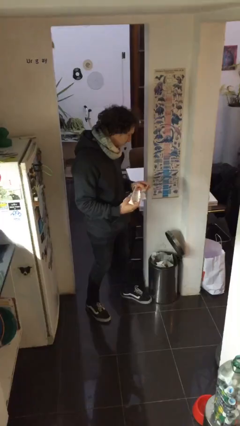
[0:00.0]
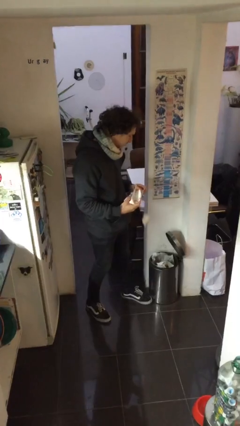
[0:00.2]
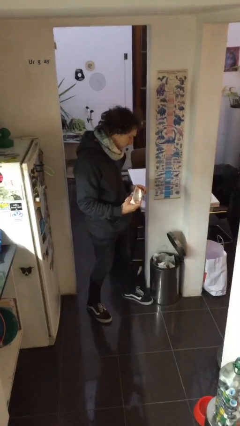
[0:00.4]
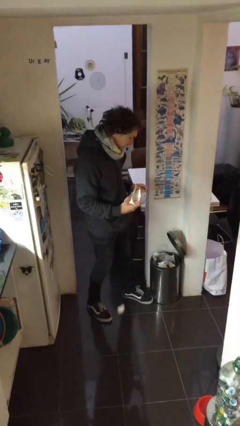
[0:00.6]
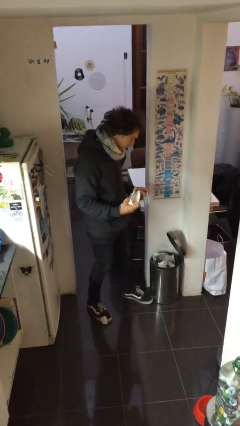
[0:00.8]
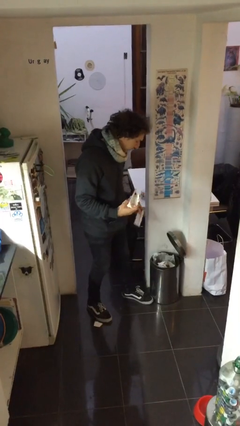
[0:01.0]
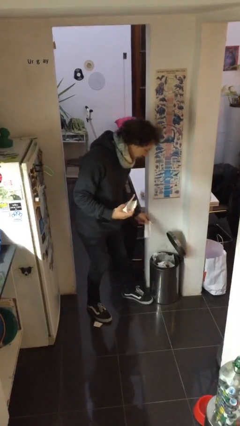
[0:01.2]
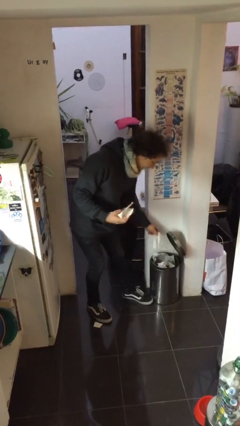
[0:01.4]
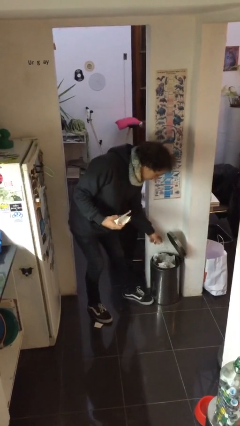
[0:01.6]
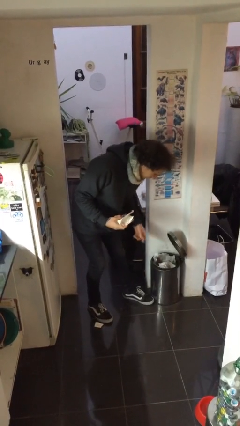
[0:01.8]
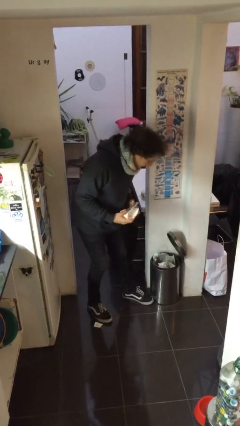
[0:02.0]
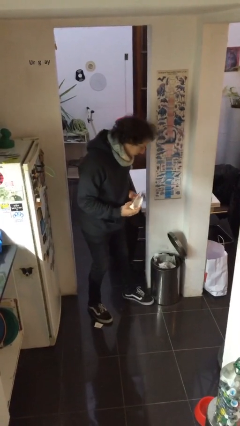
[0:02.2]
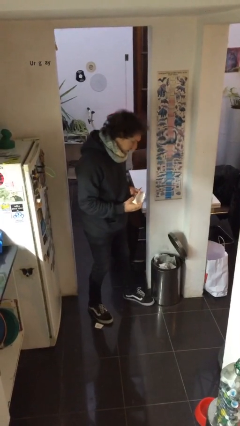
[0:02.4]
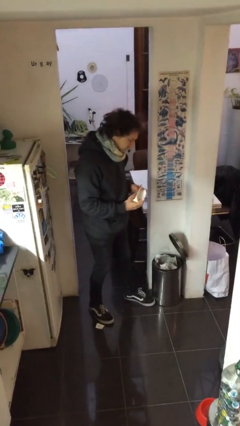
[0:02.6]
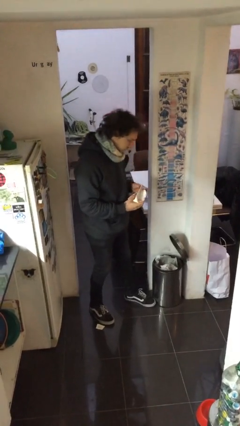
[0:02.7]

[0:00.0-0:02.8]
person discards trash

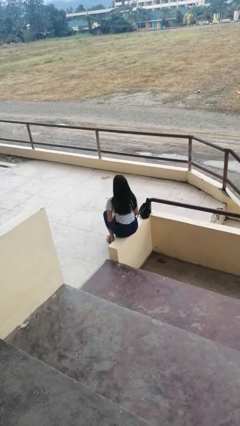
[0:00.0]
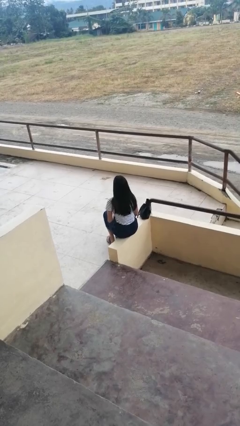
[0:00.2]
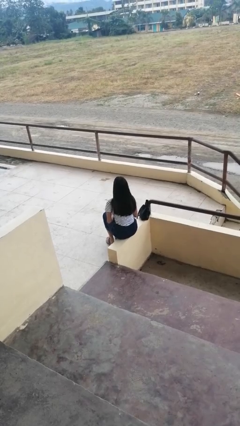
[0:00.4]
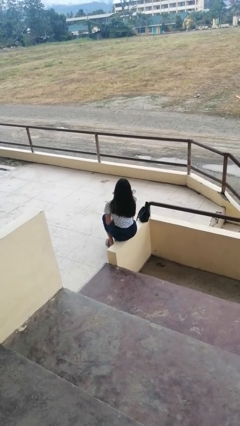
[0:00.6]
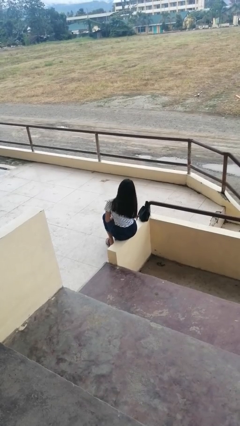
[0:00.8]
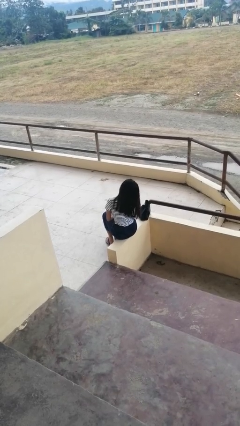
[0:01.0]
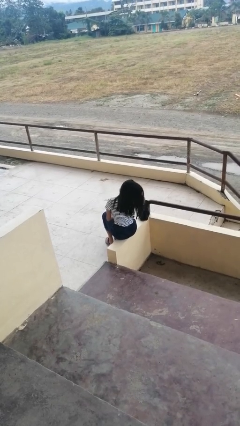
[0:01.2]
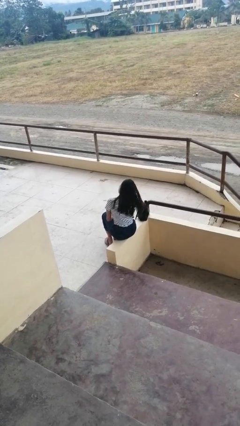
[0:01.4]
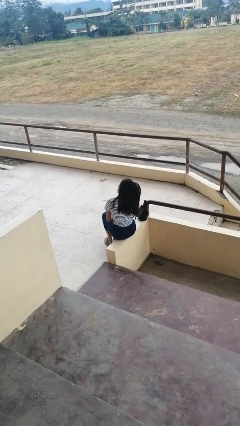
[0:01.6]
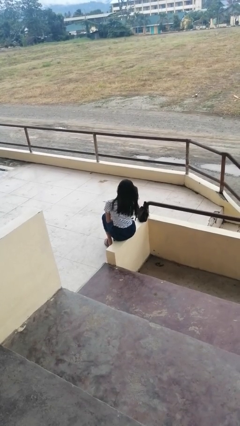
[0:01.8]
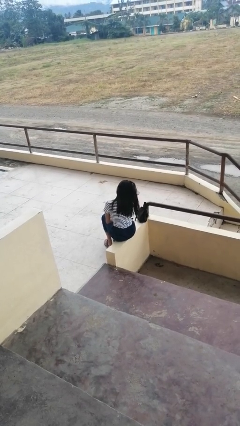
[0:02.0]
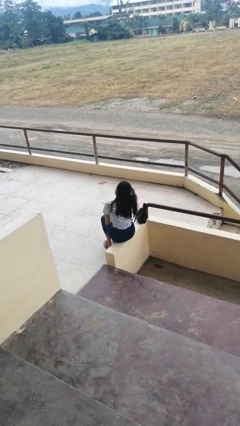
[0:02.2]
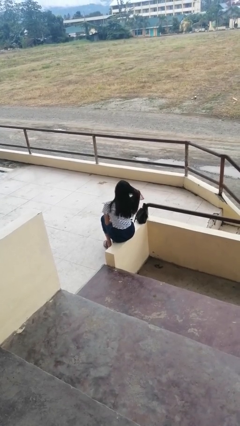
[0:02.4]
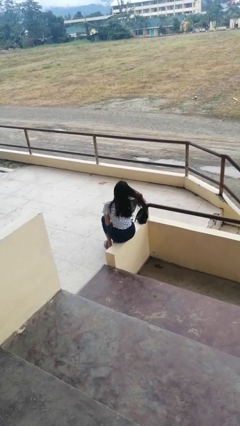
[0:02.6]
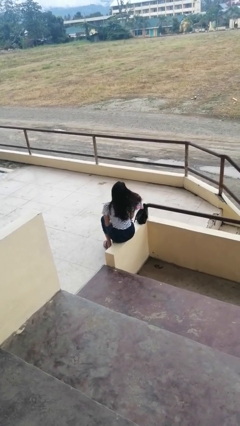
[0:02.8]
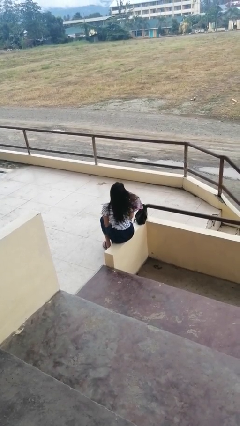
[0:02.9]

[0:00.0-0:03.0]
person dries hair with towel

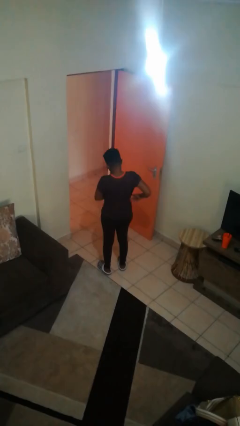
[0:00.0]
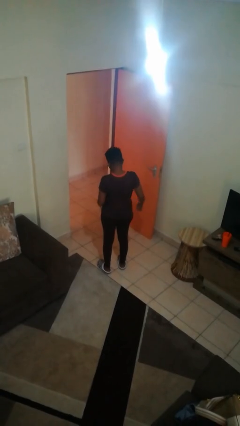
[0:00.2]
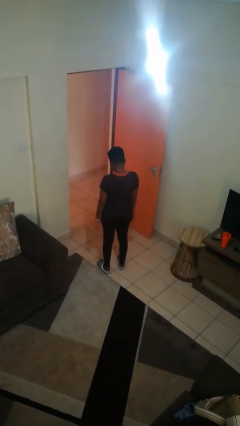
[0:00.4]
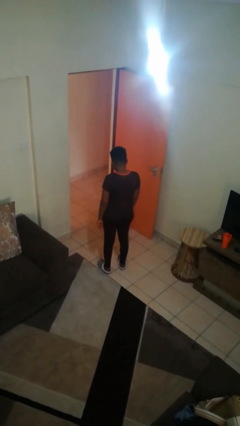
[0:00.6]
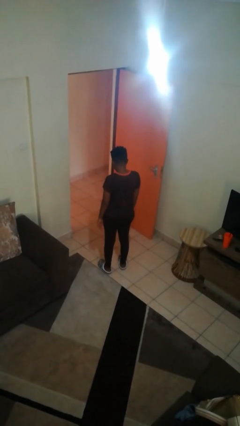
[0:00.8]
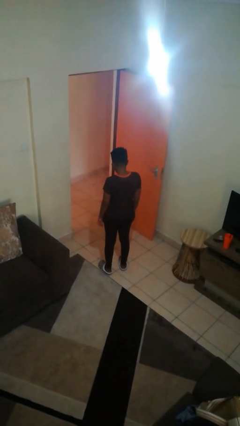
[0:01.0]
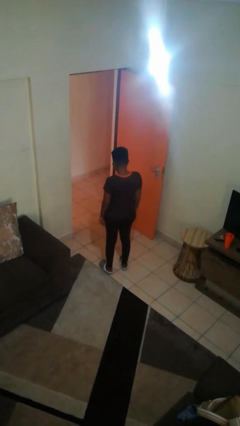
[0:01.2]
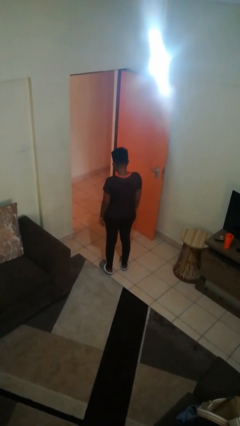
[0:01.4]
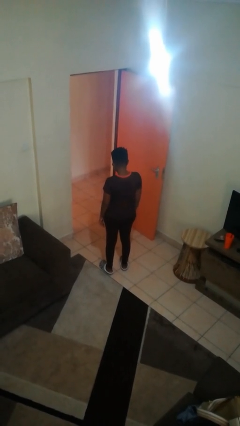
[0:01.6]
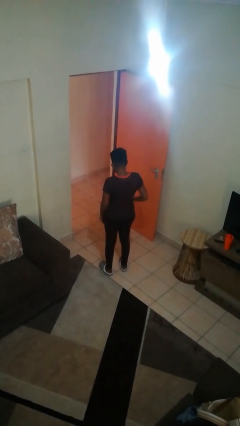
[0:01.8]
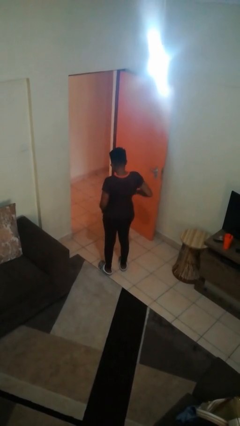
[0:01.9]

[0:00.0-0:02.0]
person puts phone into pocket

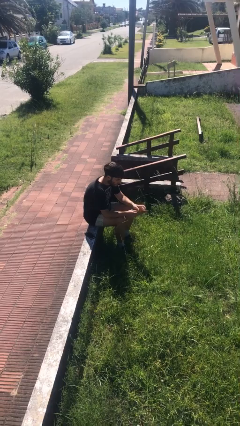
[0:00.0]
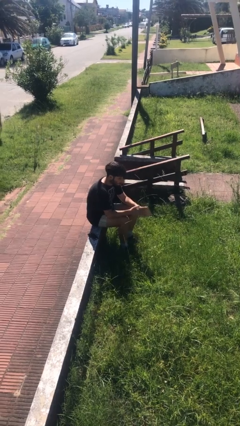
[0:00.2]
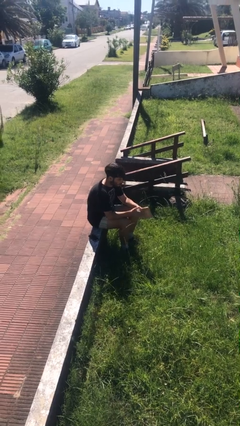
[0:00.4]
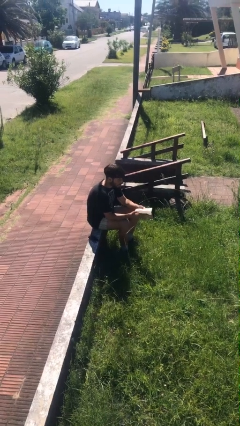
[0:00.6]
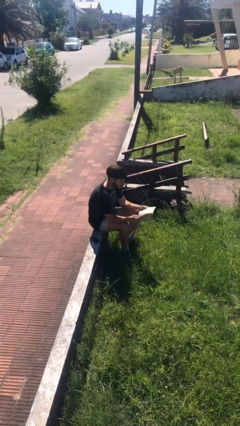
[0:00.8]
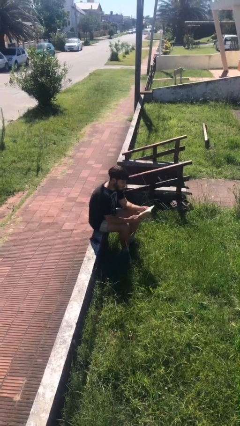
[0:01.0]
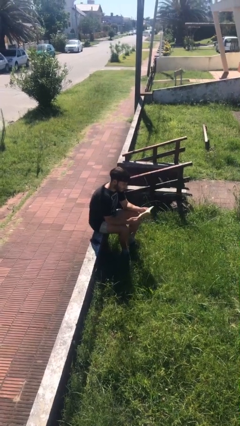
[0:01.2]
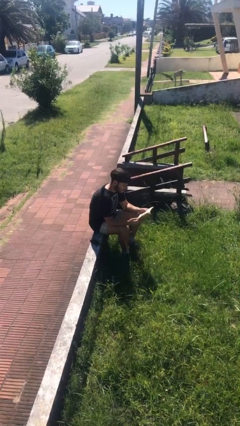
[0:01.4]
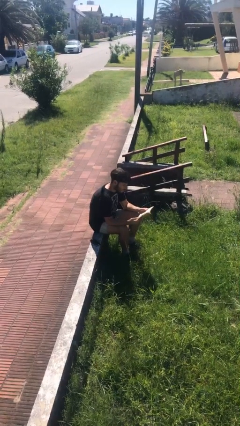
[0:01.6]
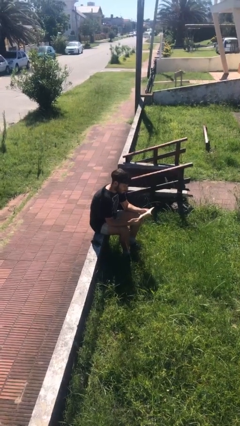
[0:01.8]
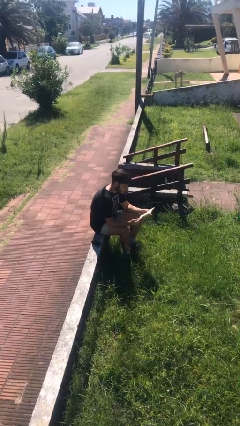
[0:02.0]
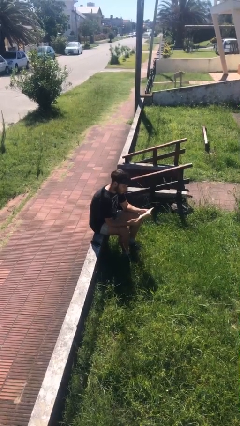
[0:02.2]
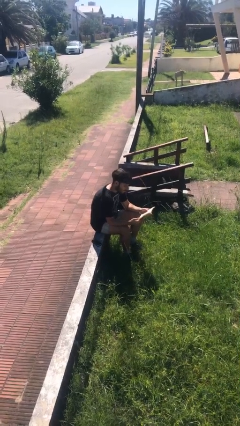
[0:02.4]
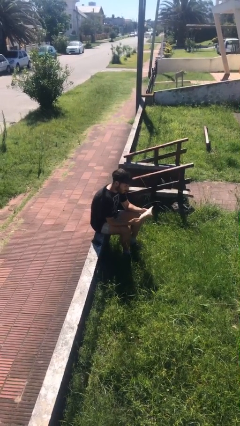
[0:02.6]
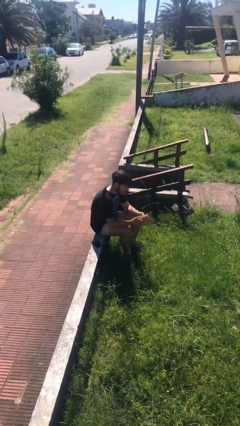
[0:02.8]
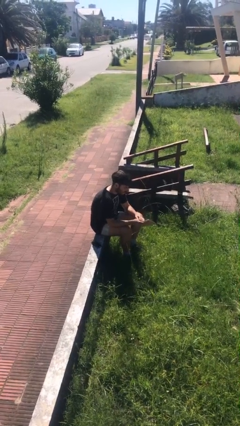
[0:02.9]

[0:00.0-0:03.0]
person reads document

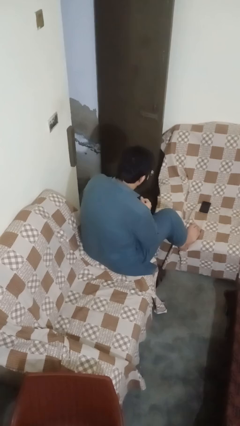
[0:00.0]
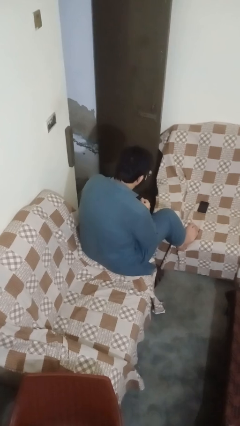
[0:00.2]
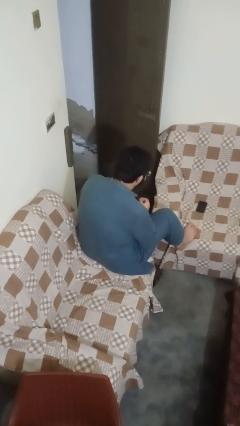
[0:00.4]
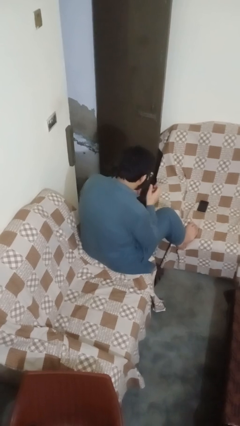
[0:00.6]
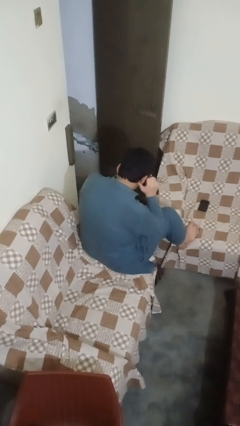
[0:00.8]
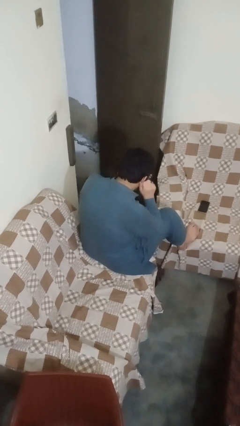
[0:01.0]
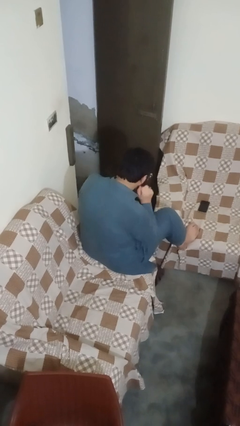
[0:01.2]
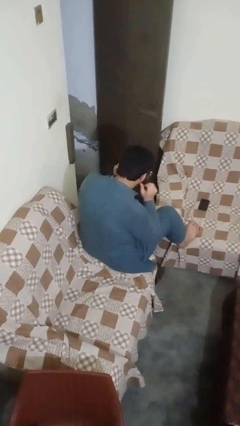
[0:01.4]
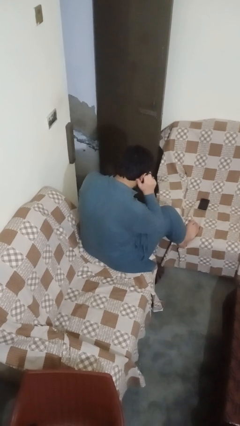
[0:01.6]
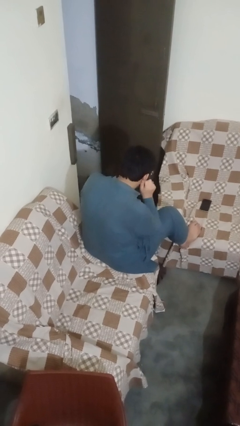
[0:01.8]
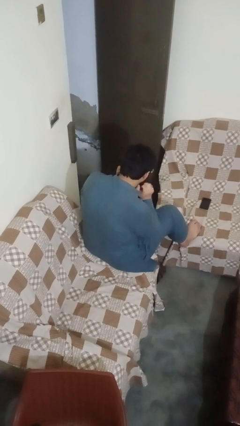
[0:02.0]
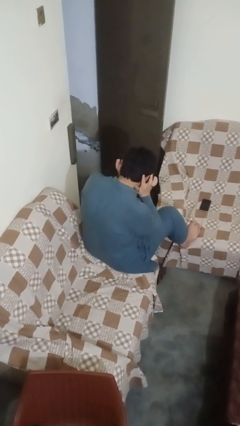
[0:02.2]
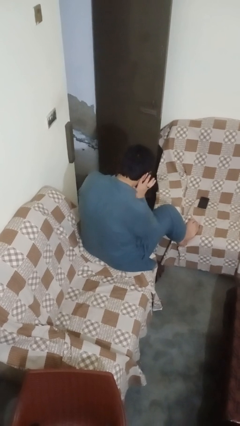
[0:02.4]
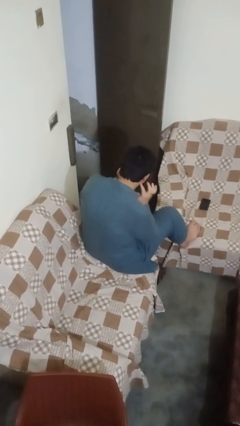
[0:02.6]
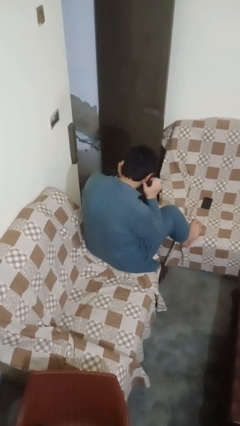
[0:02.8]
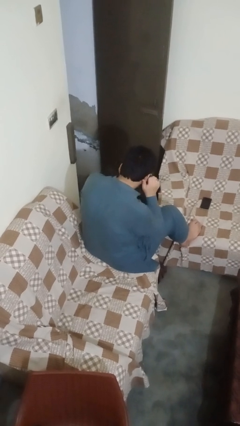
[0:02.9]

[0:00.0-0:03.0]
person touches earlobe

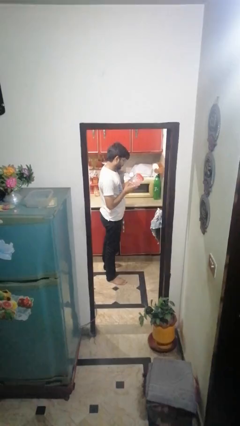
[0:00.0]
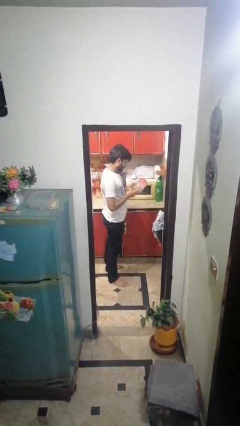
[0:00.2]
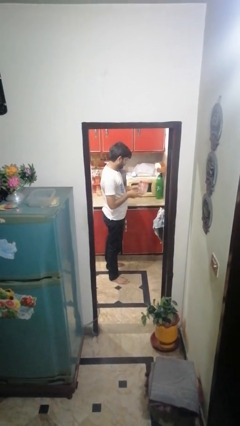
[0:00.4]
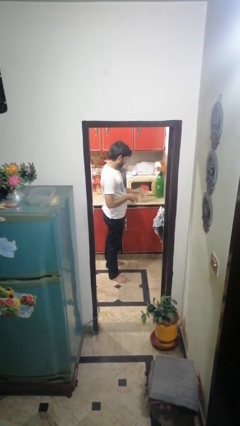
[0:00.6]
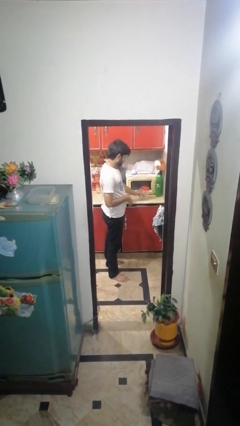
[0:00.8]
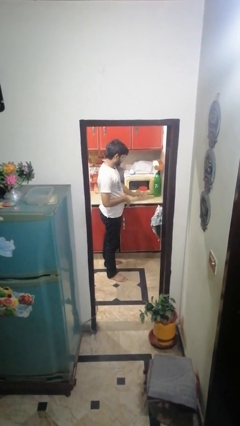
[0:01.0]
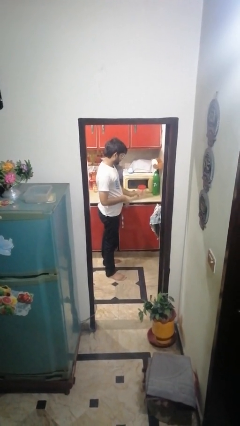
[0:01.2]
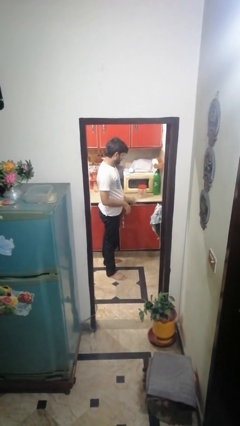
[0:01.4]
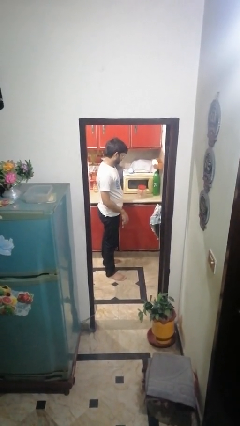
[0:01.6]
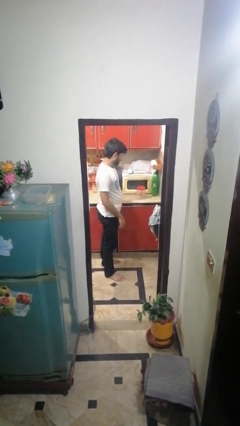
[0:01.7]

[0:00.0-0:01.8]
person puts down object on countertop

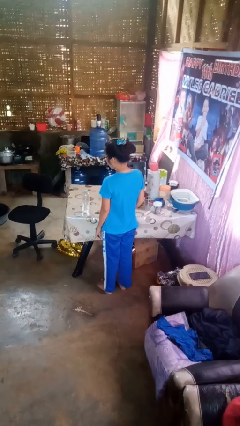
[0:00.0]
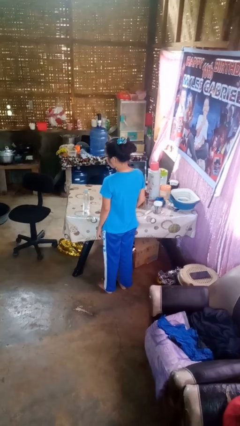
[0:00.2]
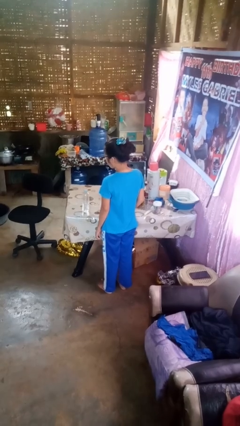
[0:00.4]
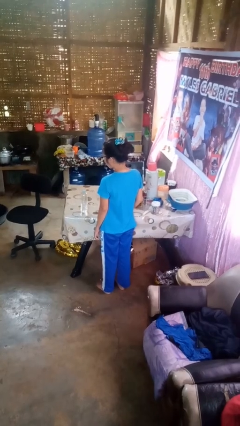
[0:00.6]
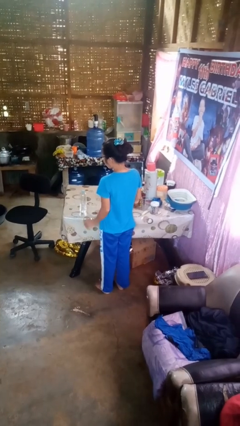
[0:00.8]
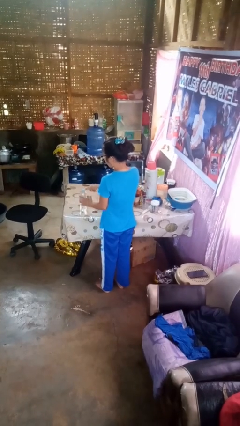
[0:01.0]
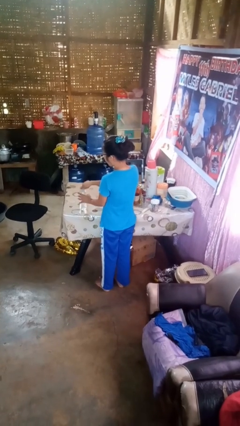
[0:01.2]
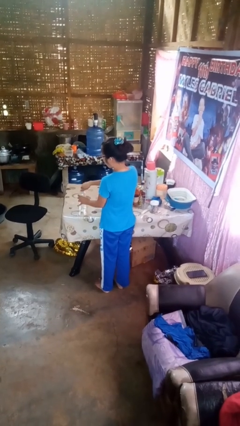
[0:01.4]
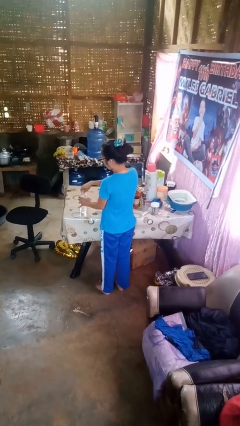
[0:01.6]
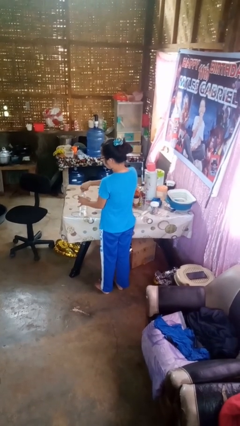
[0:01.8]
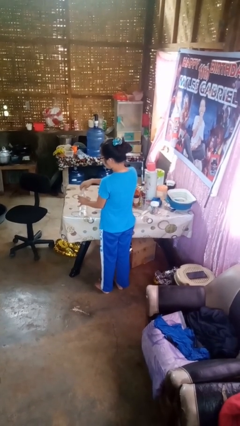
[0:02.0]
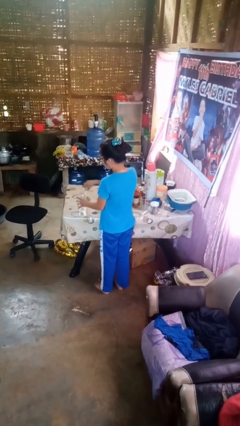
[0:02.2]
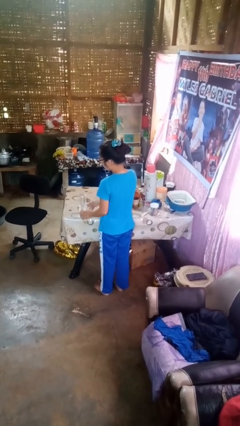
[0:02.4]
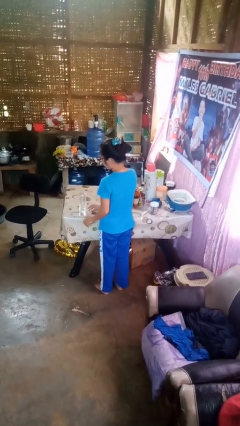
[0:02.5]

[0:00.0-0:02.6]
person unscrews lid from bottle
